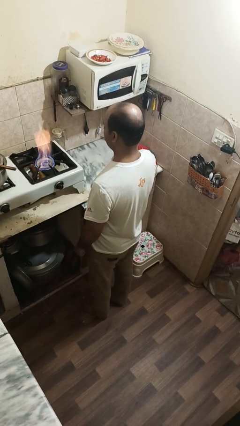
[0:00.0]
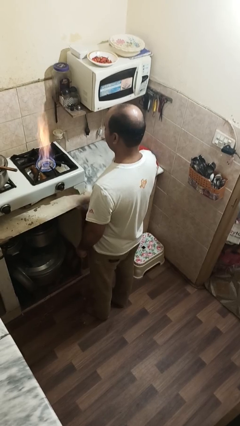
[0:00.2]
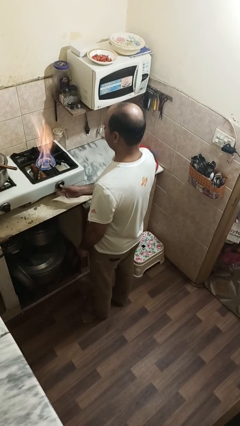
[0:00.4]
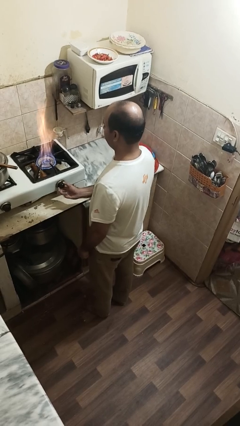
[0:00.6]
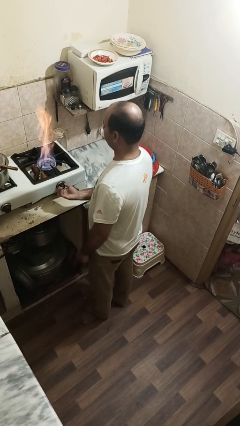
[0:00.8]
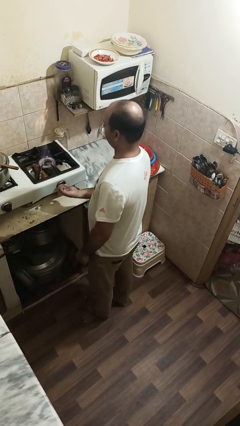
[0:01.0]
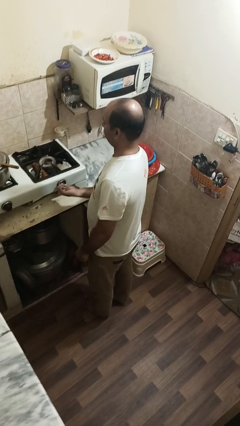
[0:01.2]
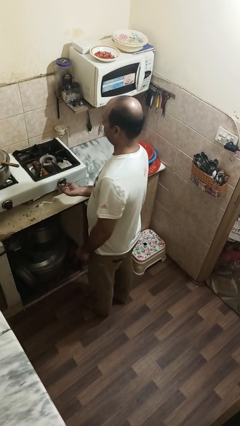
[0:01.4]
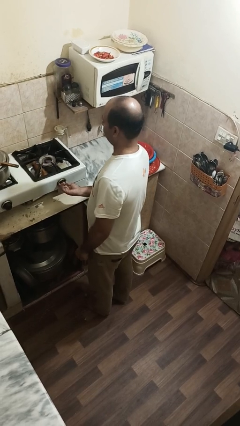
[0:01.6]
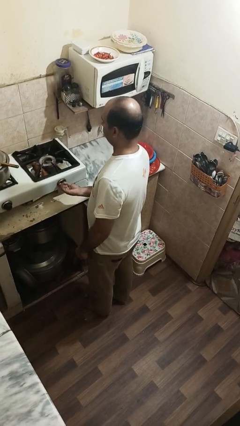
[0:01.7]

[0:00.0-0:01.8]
person turns off stovetop

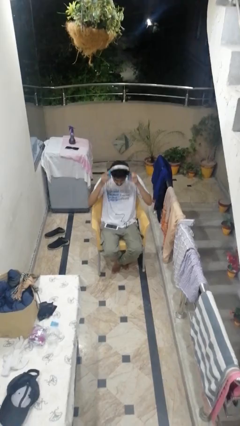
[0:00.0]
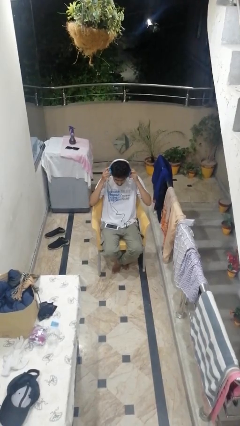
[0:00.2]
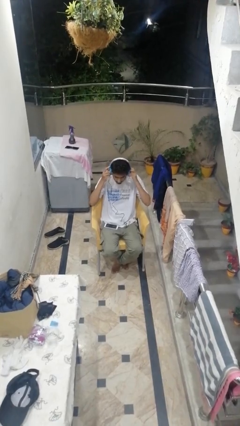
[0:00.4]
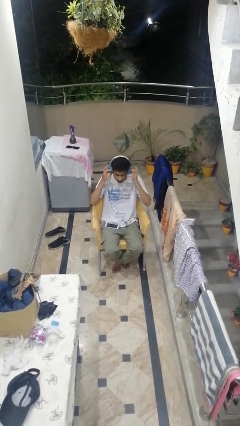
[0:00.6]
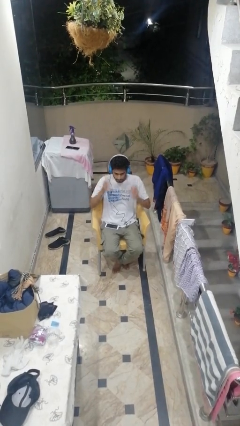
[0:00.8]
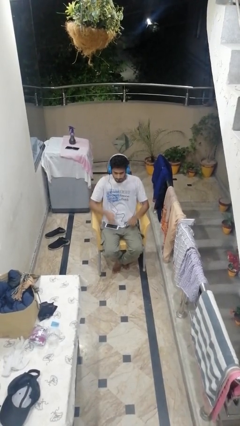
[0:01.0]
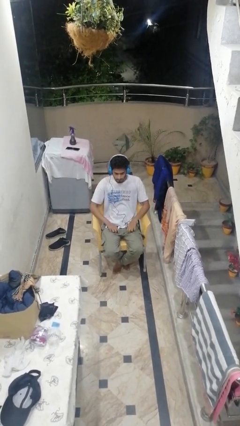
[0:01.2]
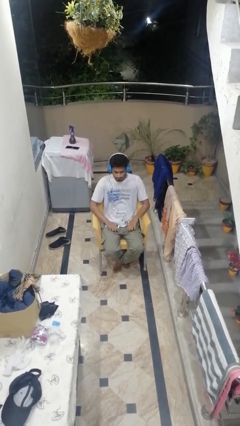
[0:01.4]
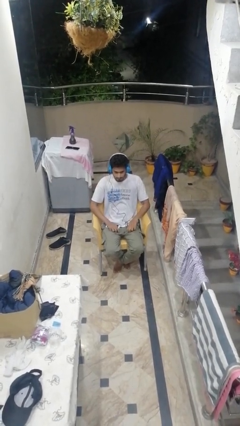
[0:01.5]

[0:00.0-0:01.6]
person puts on headphones

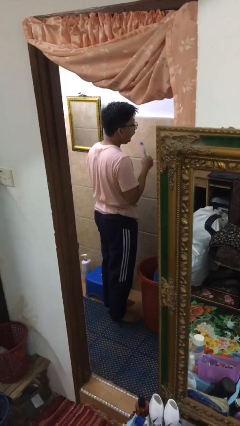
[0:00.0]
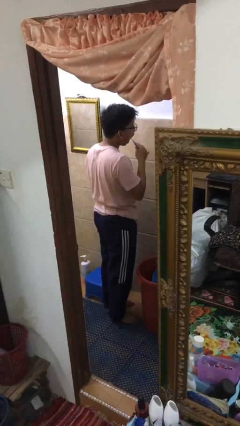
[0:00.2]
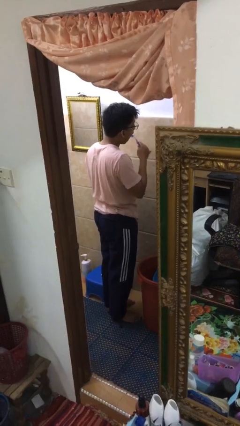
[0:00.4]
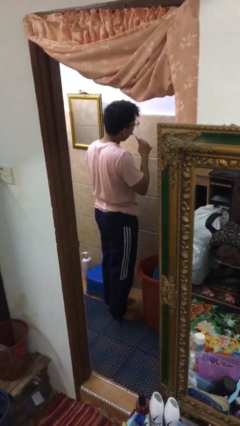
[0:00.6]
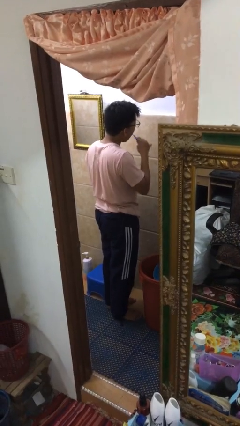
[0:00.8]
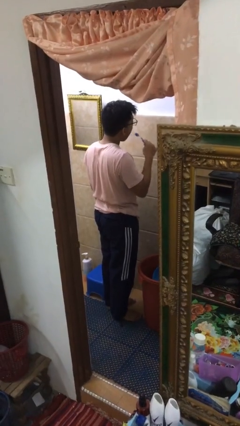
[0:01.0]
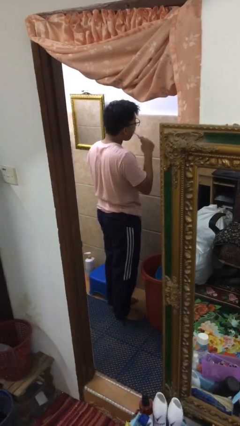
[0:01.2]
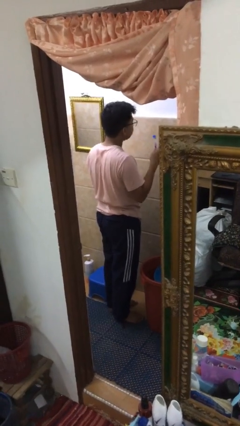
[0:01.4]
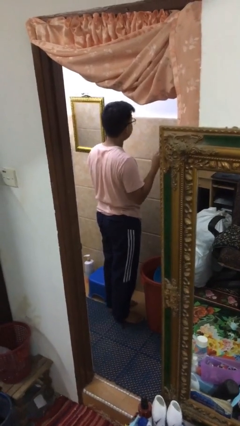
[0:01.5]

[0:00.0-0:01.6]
person brushes teeth

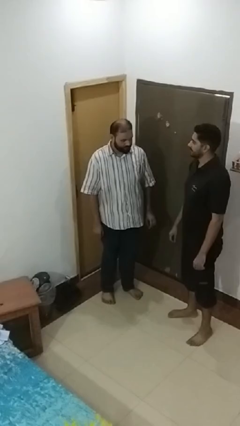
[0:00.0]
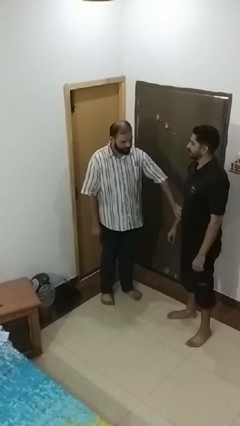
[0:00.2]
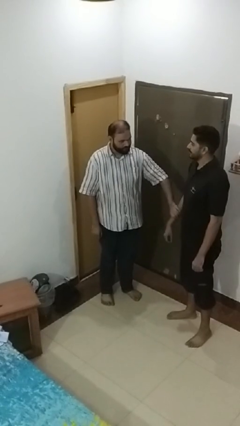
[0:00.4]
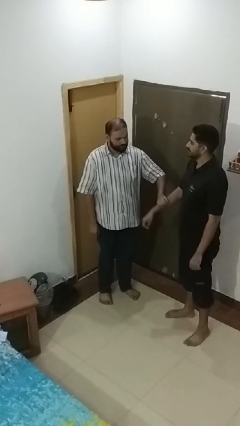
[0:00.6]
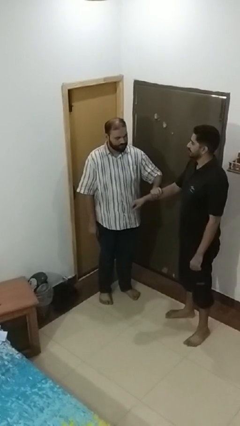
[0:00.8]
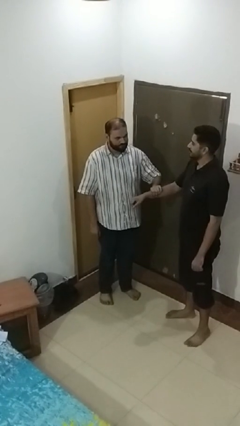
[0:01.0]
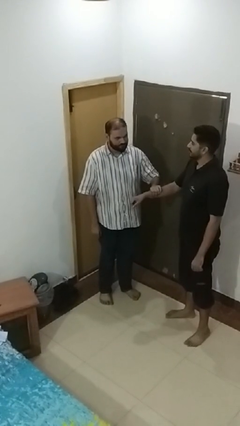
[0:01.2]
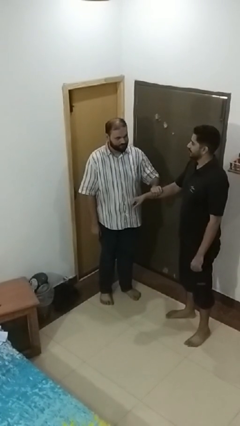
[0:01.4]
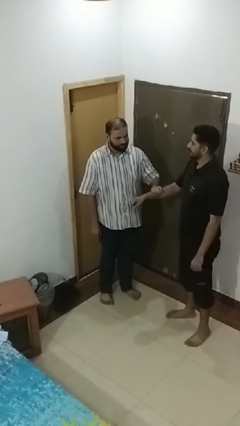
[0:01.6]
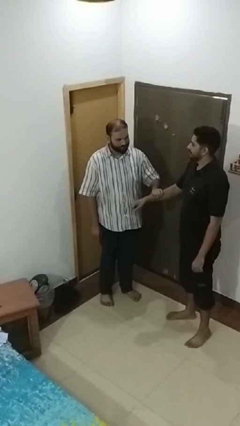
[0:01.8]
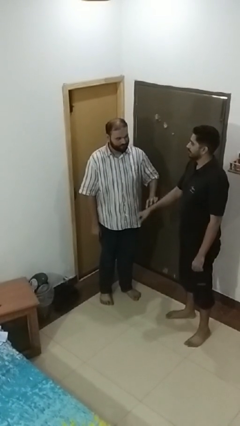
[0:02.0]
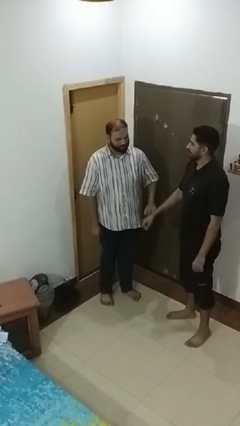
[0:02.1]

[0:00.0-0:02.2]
person grabs person by forearm

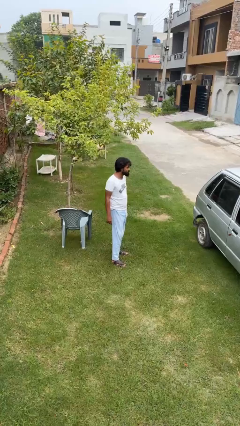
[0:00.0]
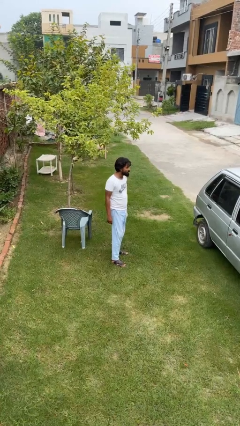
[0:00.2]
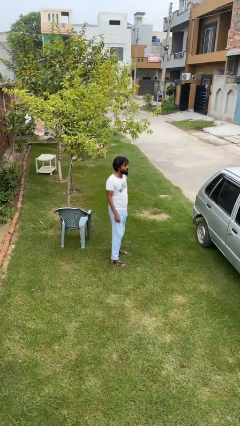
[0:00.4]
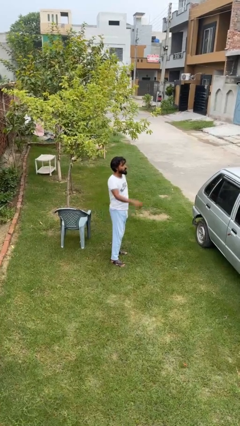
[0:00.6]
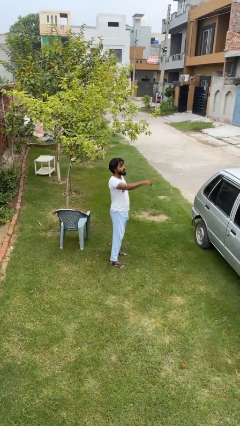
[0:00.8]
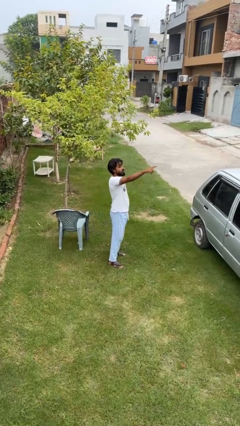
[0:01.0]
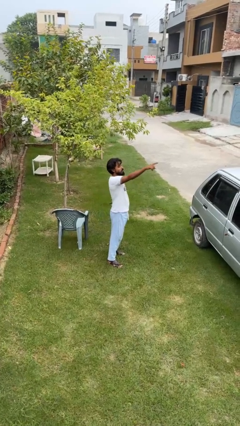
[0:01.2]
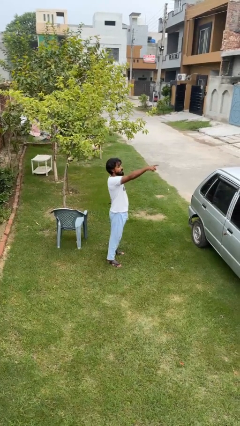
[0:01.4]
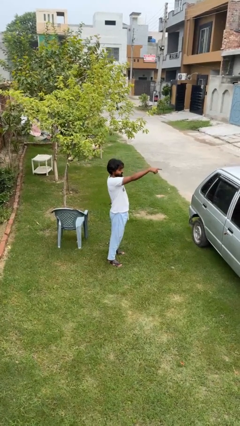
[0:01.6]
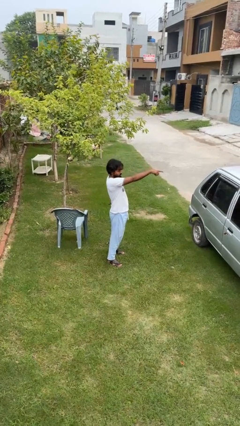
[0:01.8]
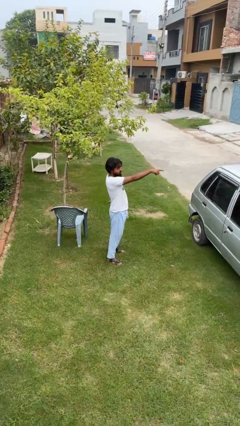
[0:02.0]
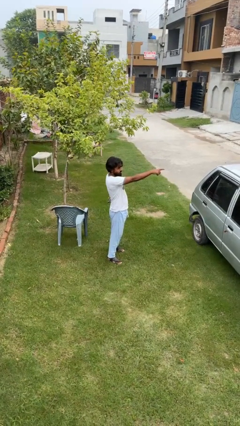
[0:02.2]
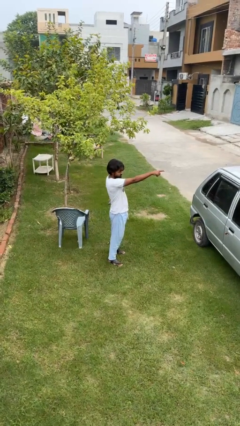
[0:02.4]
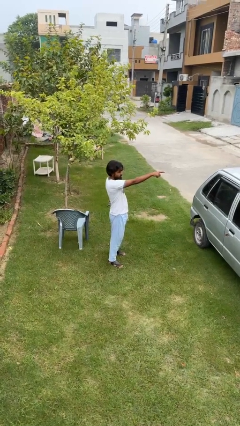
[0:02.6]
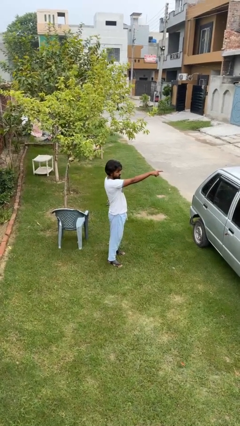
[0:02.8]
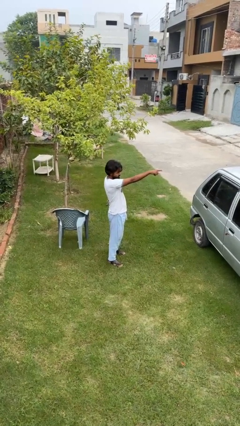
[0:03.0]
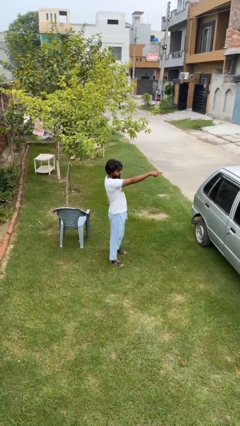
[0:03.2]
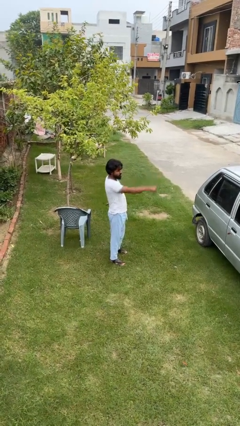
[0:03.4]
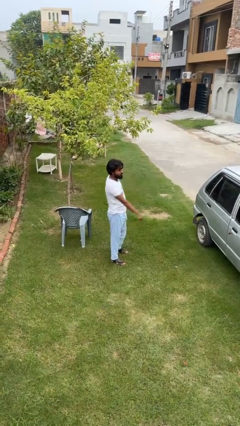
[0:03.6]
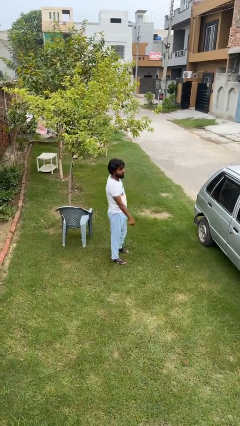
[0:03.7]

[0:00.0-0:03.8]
person points at person

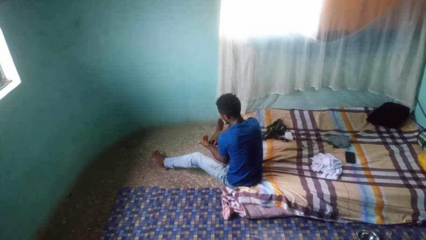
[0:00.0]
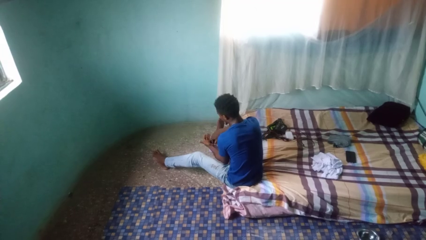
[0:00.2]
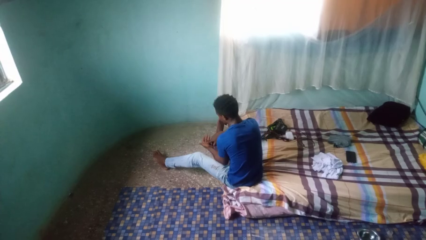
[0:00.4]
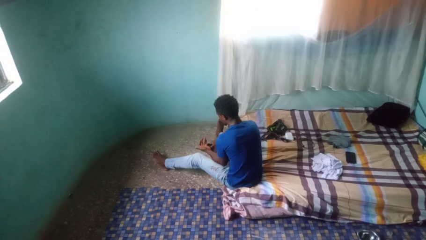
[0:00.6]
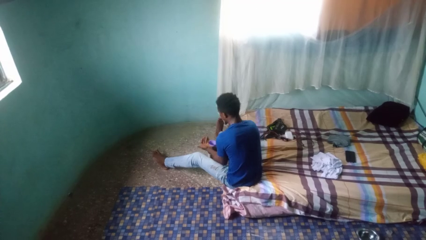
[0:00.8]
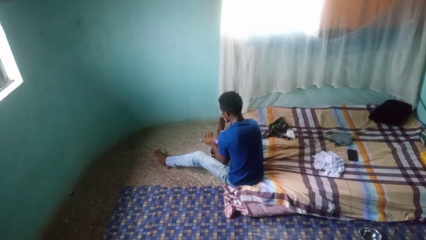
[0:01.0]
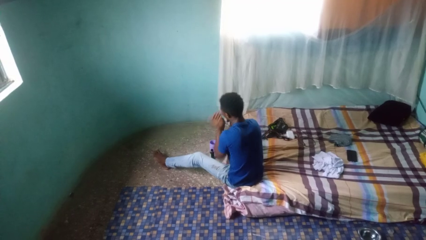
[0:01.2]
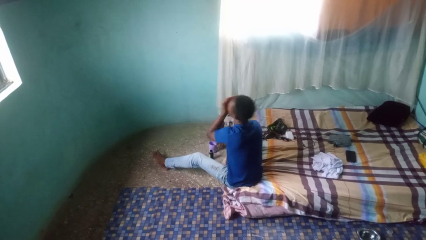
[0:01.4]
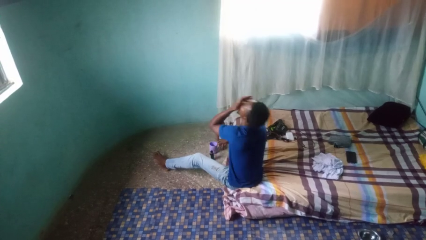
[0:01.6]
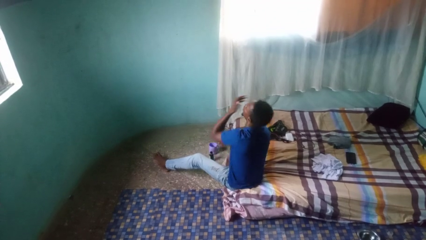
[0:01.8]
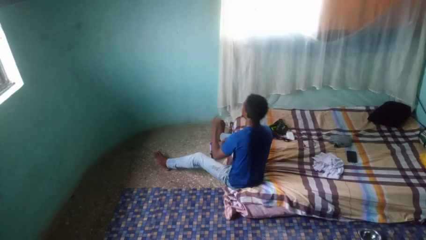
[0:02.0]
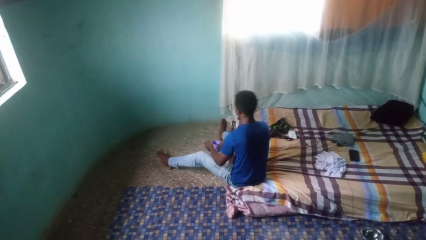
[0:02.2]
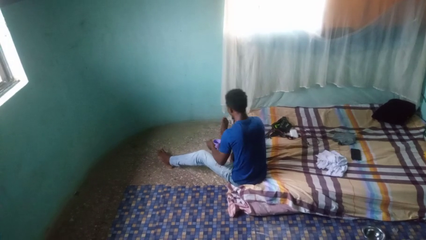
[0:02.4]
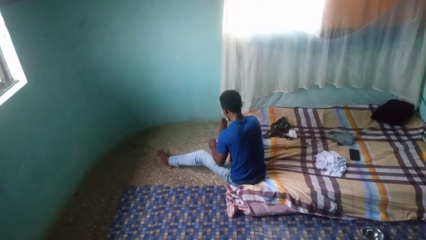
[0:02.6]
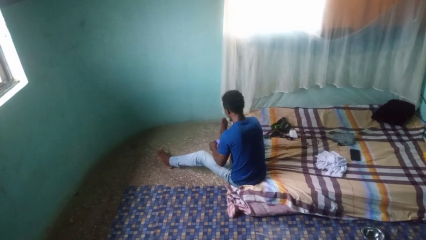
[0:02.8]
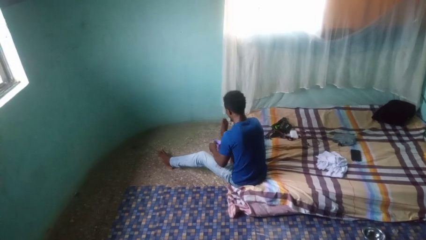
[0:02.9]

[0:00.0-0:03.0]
person takes medicine pills

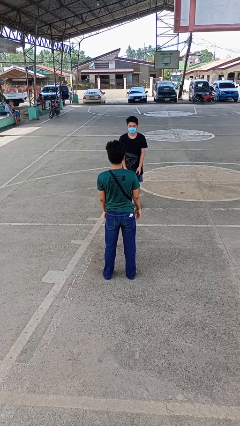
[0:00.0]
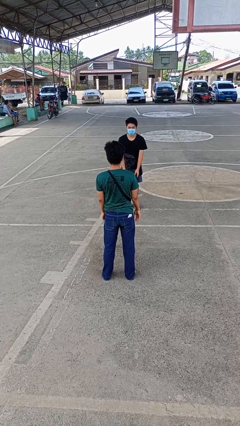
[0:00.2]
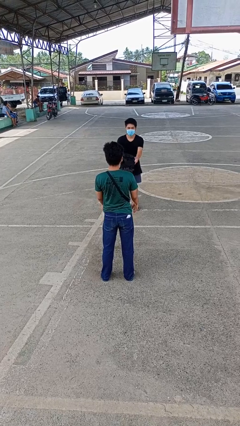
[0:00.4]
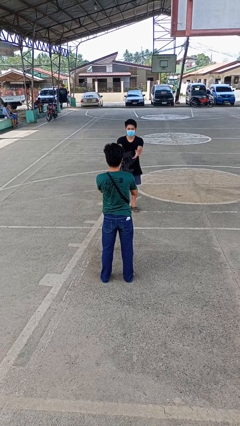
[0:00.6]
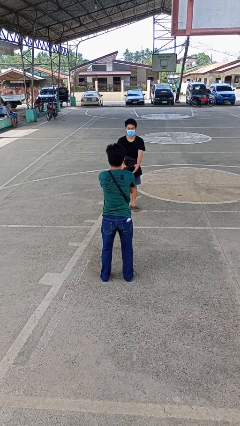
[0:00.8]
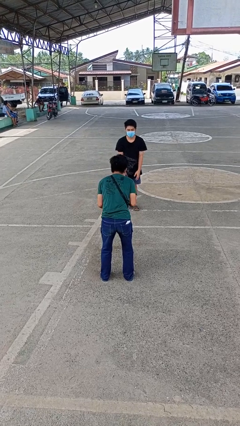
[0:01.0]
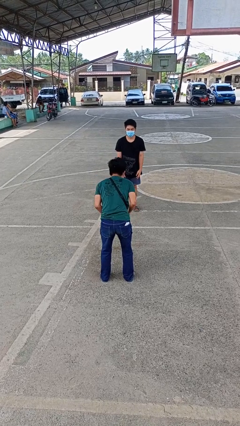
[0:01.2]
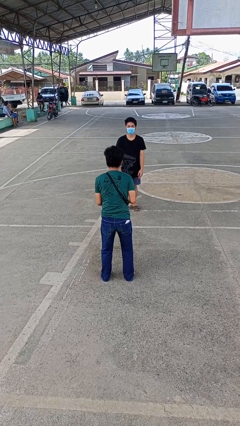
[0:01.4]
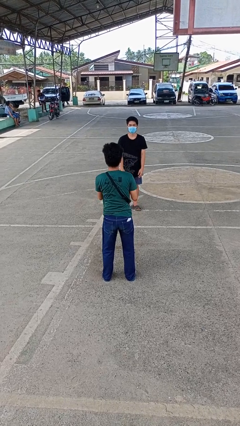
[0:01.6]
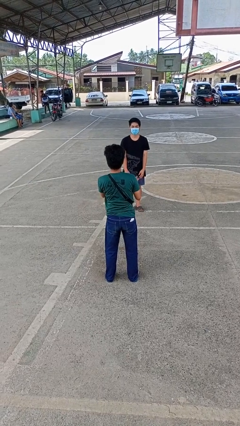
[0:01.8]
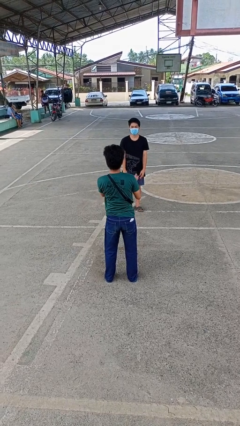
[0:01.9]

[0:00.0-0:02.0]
person catches object from person

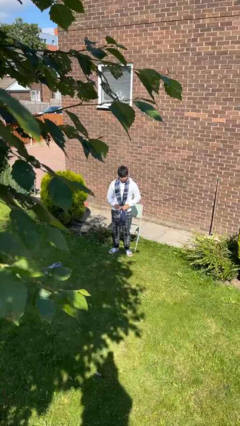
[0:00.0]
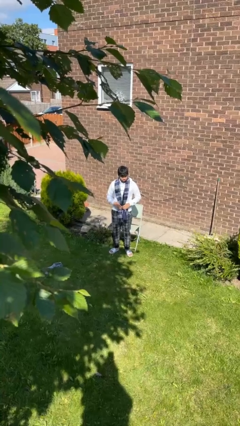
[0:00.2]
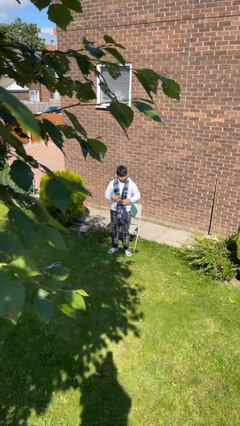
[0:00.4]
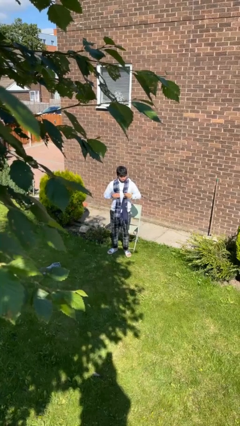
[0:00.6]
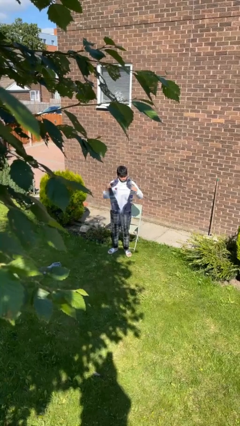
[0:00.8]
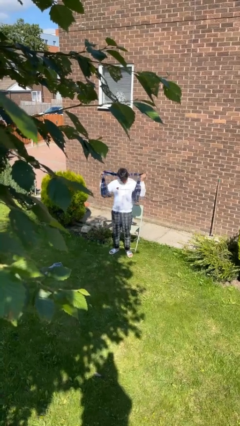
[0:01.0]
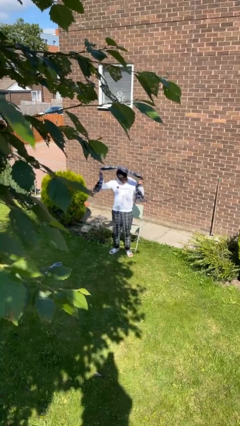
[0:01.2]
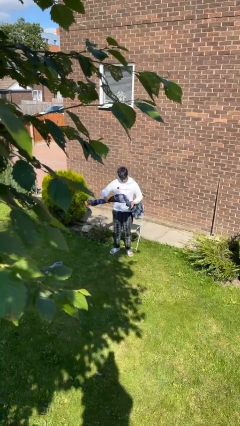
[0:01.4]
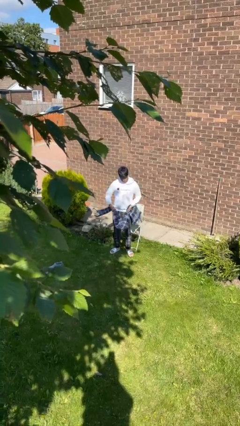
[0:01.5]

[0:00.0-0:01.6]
person takes off scarf
